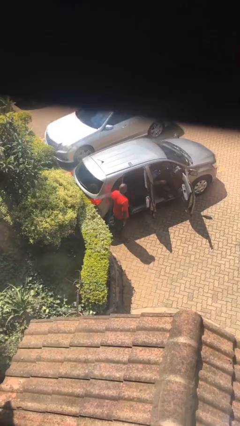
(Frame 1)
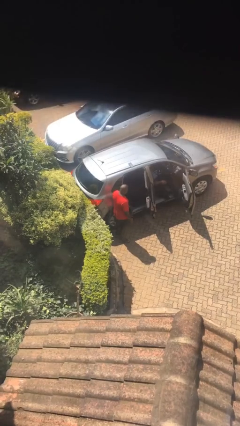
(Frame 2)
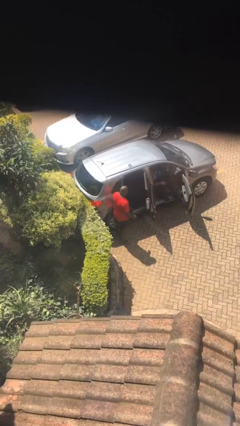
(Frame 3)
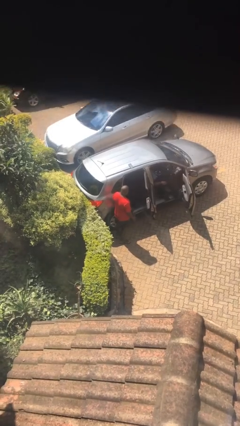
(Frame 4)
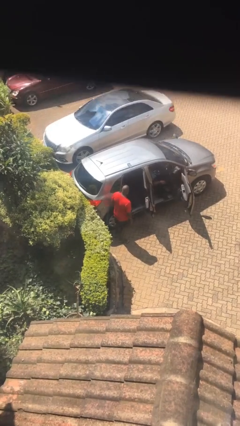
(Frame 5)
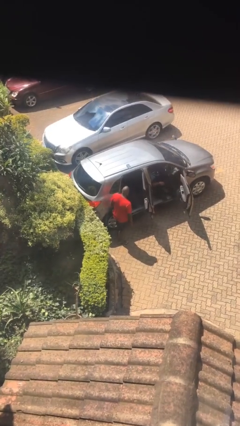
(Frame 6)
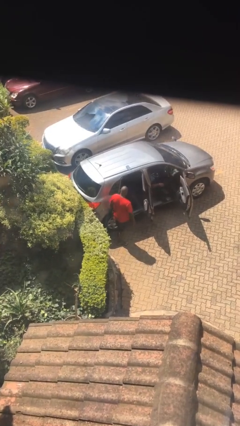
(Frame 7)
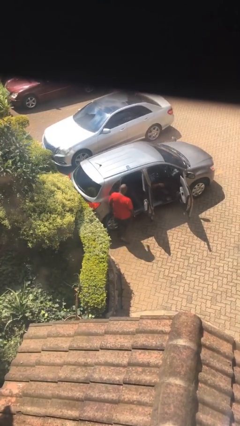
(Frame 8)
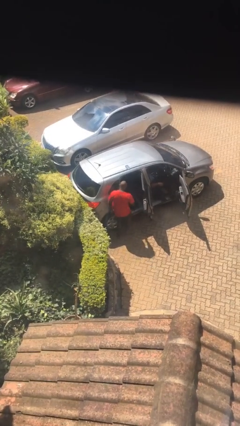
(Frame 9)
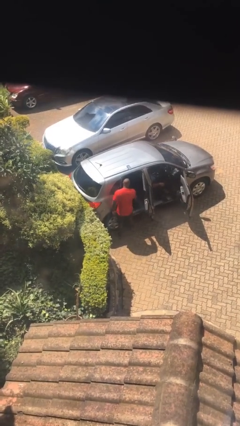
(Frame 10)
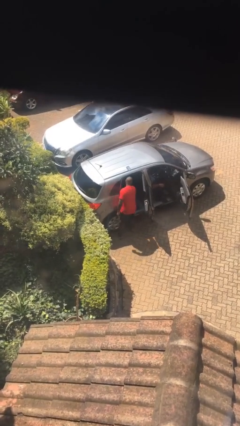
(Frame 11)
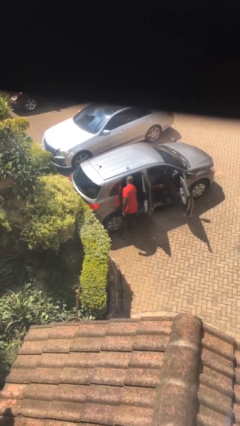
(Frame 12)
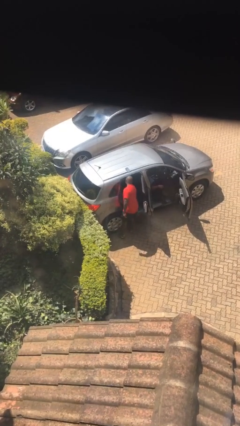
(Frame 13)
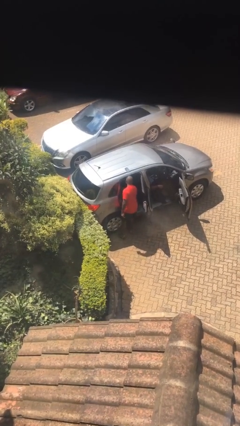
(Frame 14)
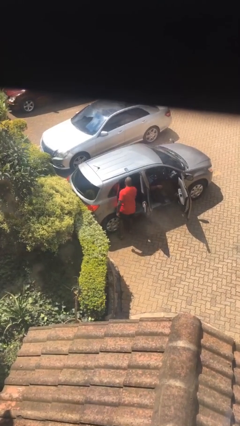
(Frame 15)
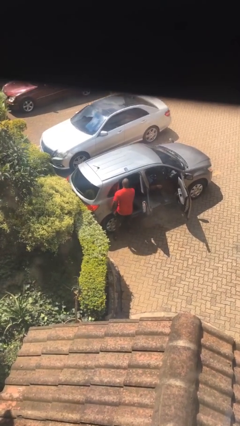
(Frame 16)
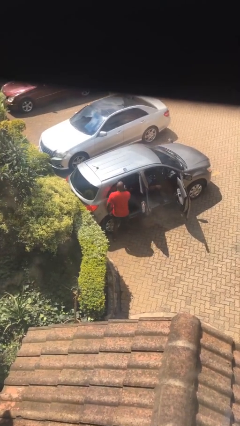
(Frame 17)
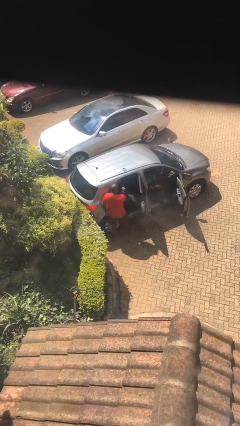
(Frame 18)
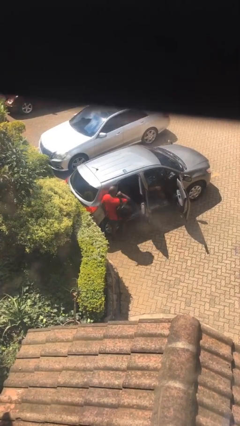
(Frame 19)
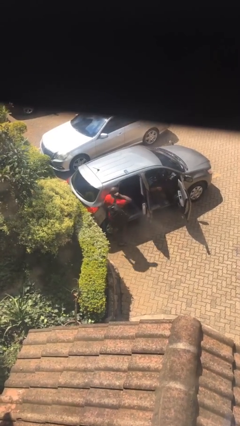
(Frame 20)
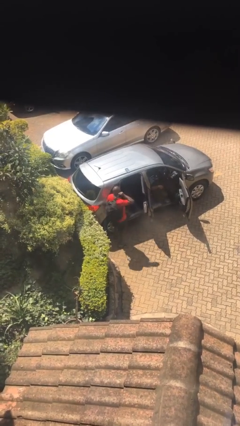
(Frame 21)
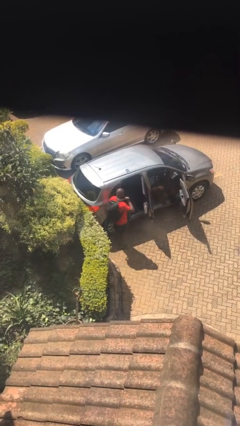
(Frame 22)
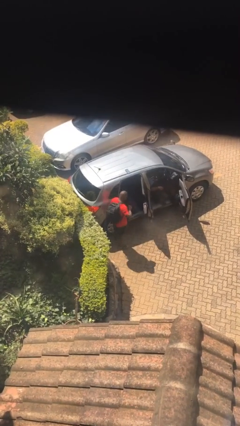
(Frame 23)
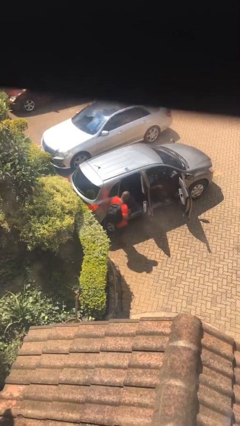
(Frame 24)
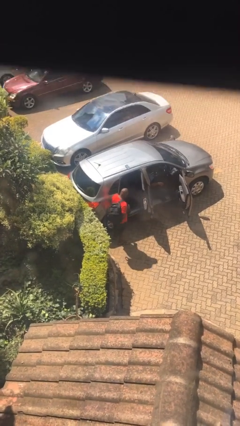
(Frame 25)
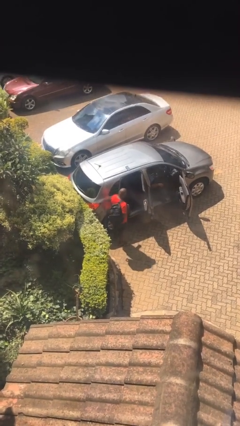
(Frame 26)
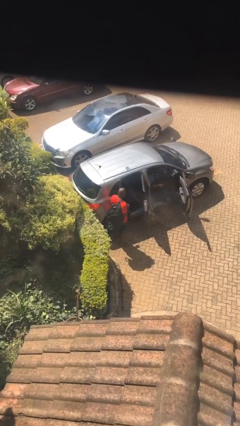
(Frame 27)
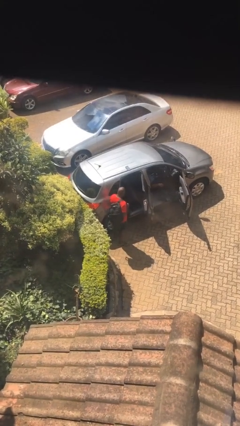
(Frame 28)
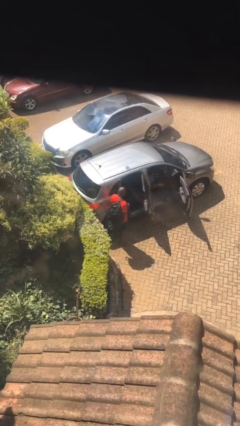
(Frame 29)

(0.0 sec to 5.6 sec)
person unloads car

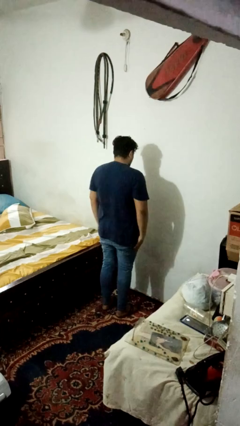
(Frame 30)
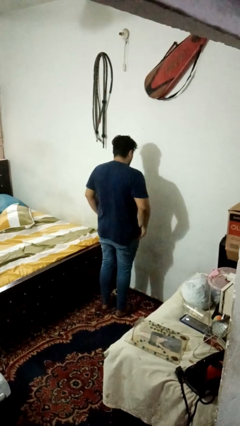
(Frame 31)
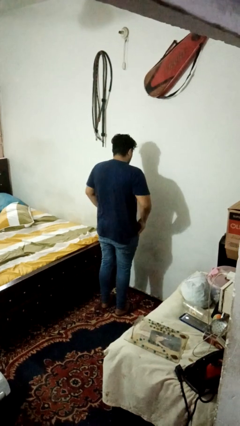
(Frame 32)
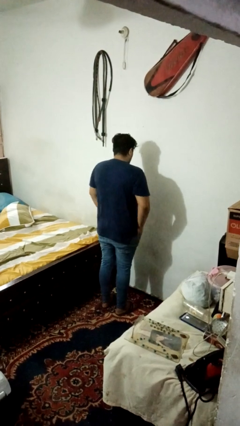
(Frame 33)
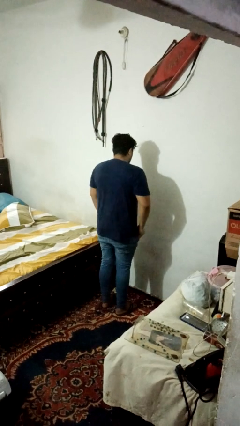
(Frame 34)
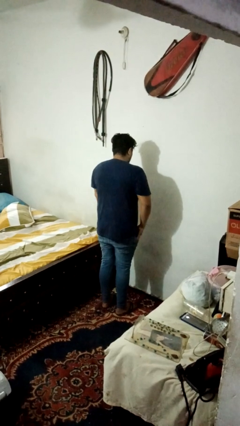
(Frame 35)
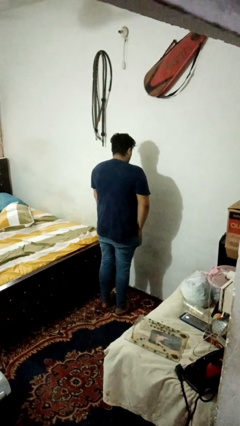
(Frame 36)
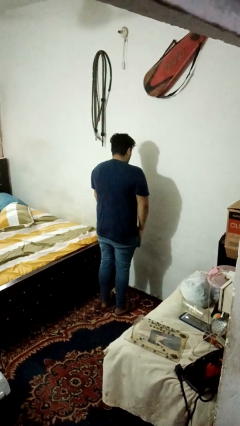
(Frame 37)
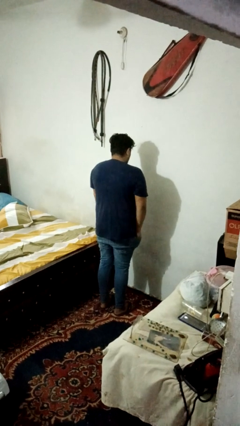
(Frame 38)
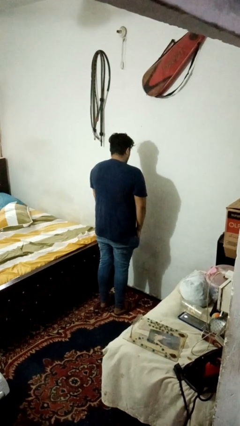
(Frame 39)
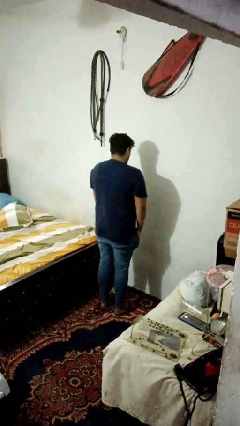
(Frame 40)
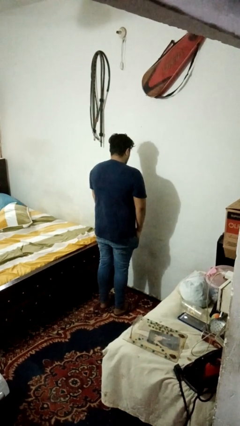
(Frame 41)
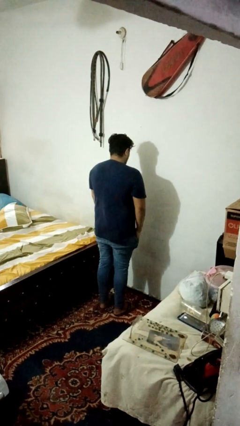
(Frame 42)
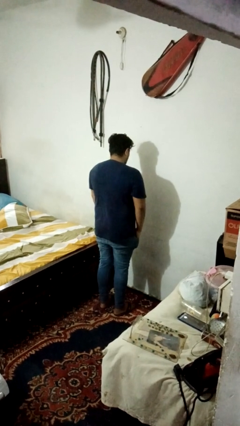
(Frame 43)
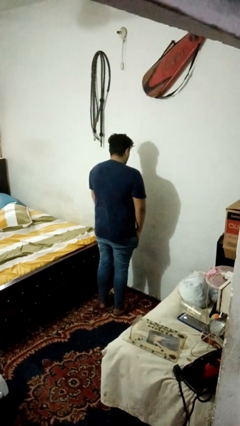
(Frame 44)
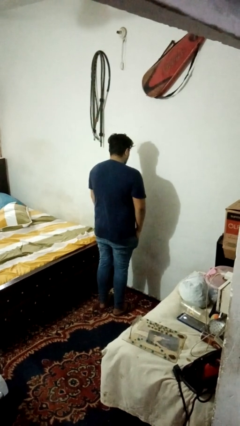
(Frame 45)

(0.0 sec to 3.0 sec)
person puts hands in back pockets

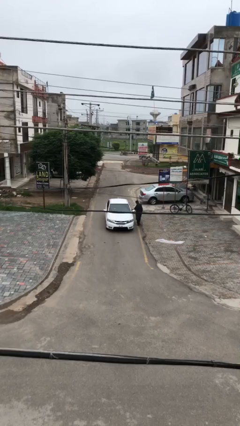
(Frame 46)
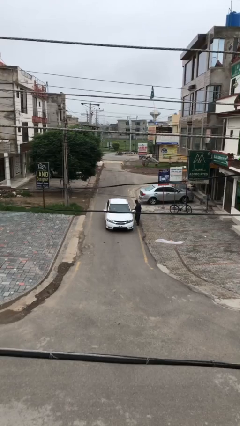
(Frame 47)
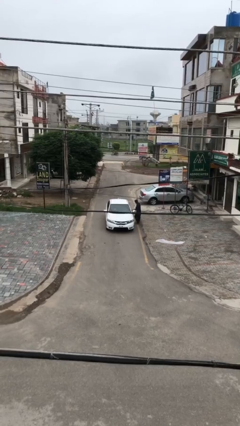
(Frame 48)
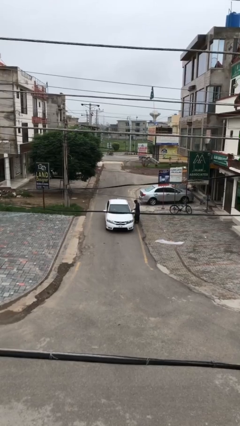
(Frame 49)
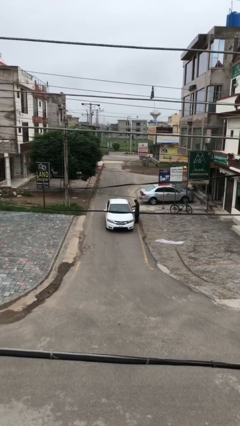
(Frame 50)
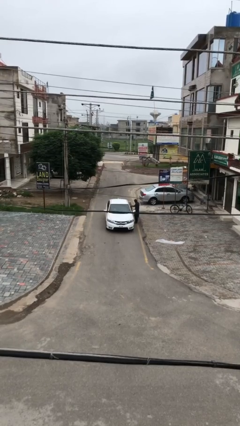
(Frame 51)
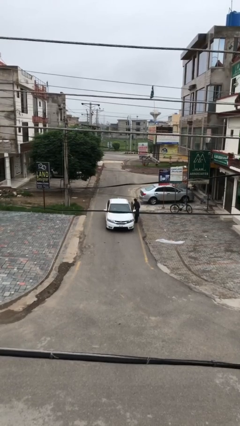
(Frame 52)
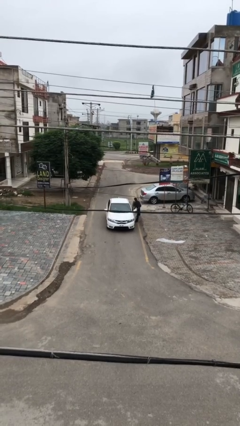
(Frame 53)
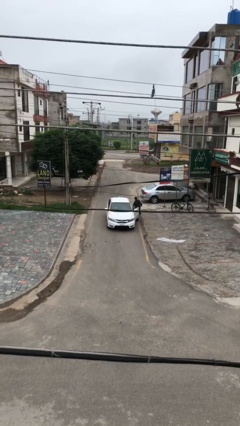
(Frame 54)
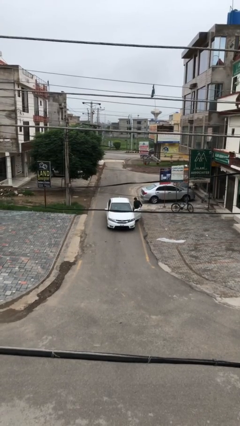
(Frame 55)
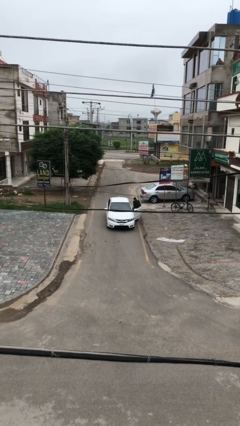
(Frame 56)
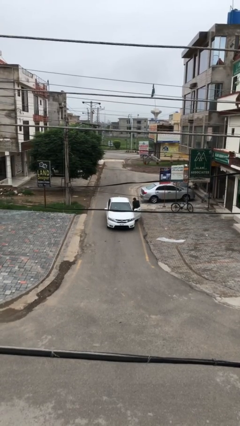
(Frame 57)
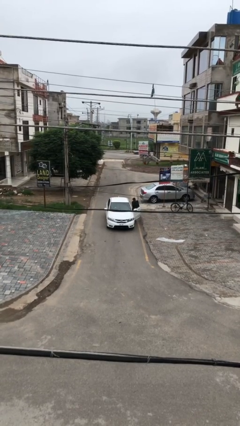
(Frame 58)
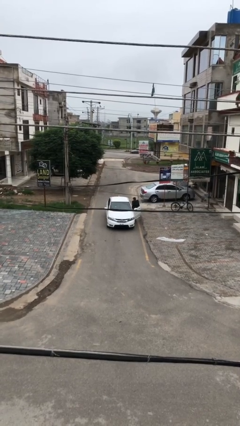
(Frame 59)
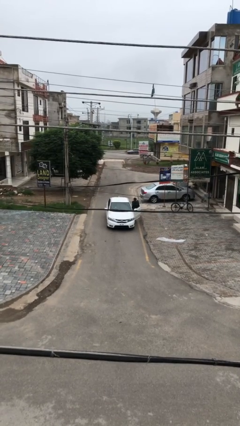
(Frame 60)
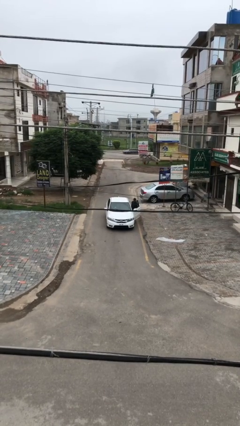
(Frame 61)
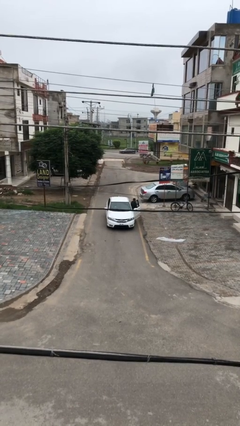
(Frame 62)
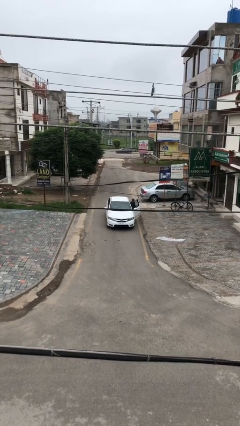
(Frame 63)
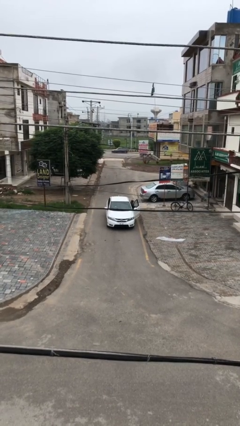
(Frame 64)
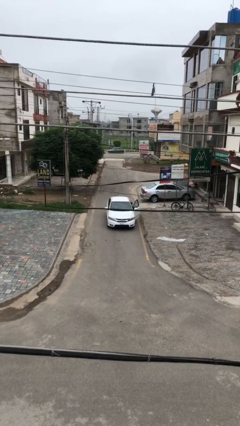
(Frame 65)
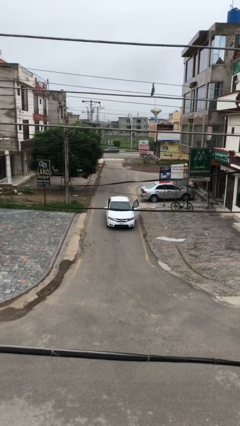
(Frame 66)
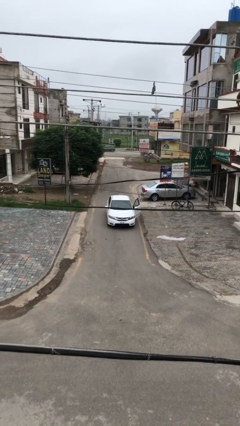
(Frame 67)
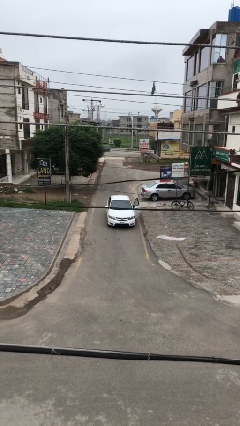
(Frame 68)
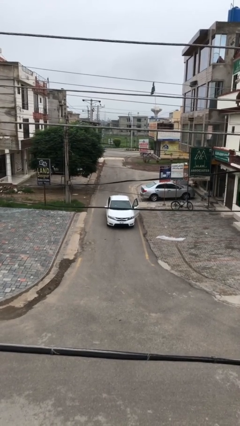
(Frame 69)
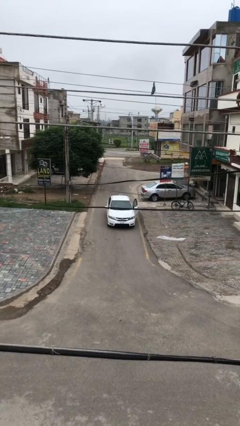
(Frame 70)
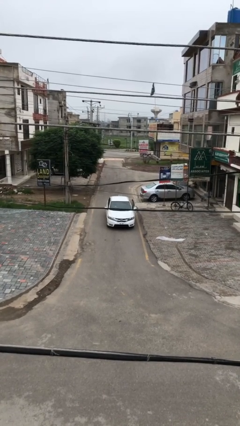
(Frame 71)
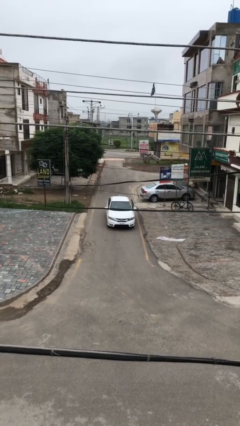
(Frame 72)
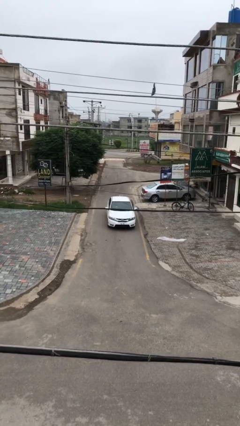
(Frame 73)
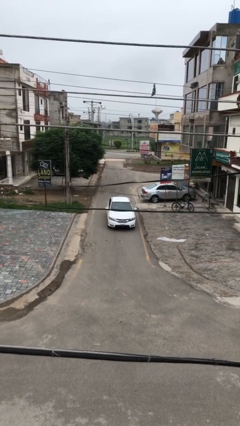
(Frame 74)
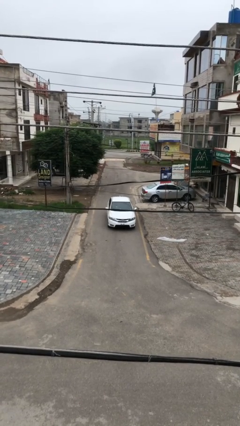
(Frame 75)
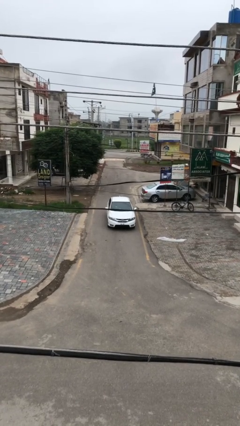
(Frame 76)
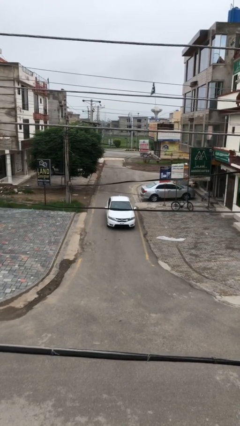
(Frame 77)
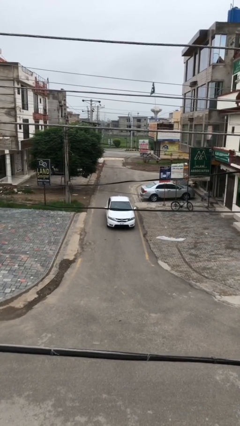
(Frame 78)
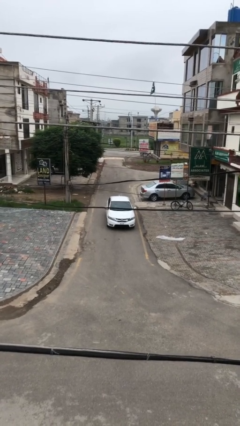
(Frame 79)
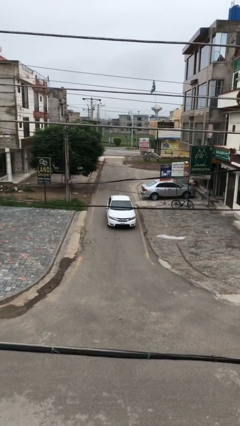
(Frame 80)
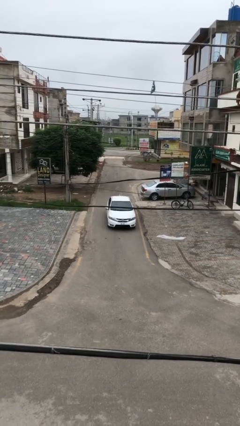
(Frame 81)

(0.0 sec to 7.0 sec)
car picks up person

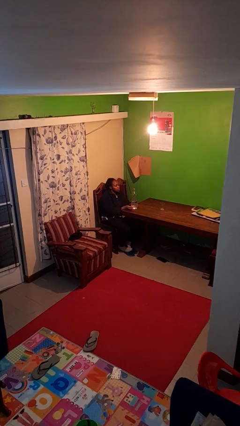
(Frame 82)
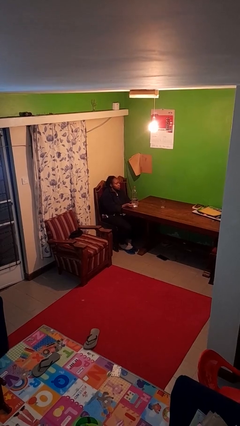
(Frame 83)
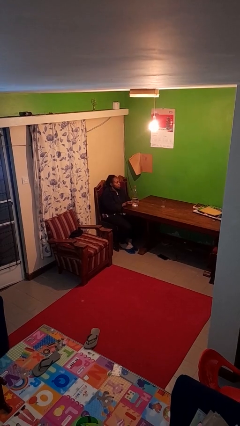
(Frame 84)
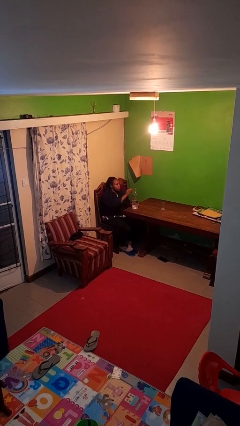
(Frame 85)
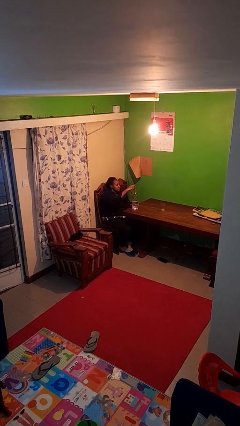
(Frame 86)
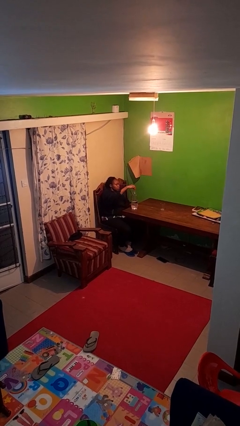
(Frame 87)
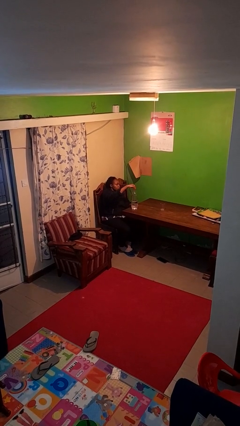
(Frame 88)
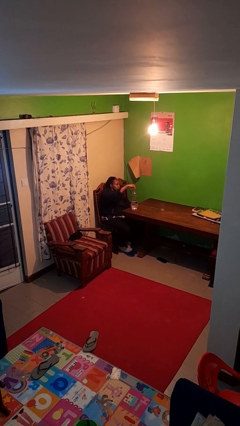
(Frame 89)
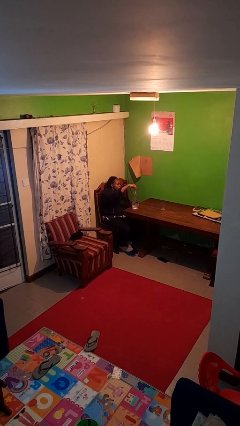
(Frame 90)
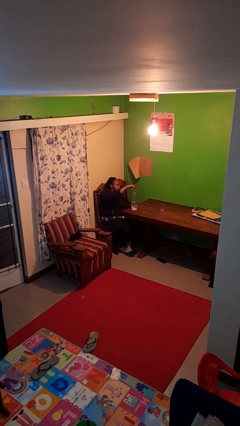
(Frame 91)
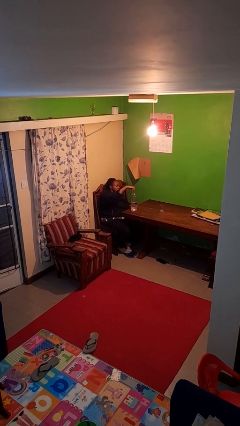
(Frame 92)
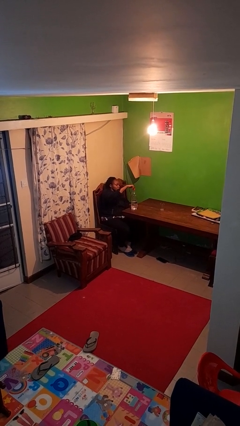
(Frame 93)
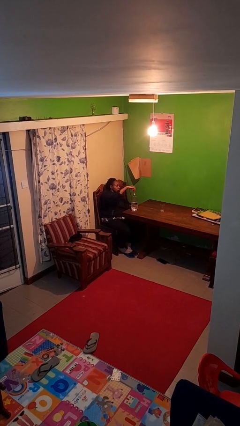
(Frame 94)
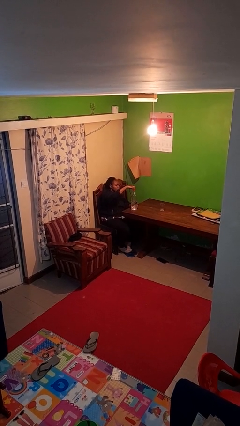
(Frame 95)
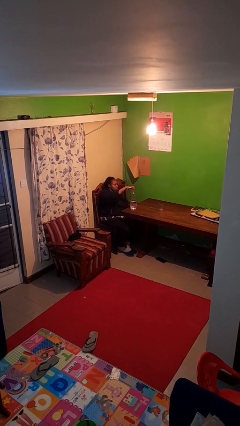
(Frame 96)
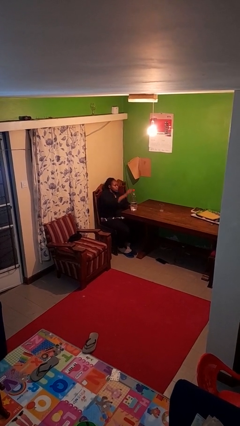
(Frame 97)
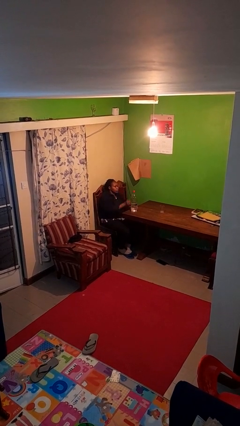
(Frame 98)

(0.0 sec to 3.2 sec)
person screws lid to bottle
